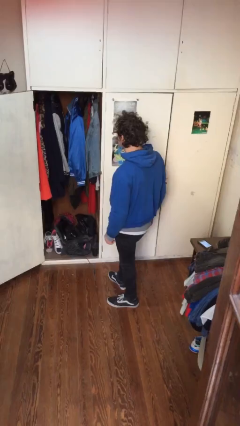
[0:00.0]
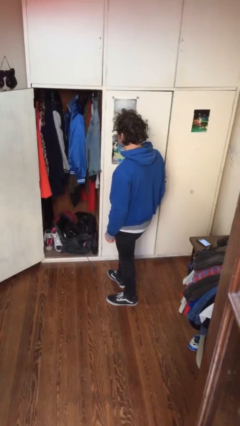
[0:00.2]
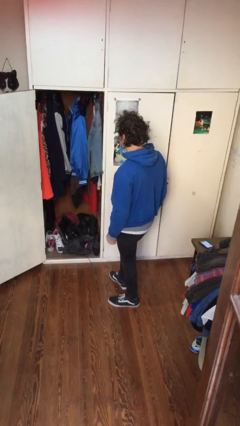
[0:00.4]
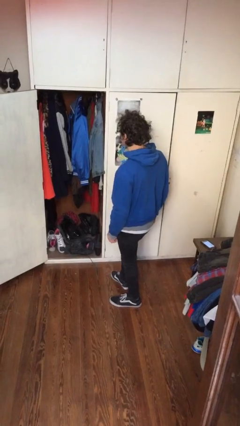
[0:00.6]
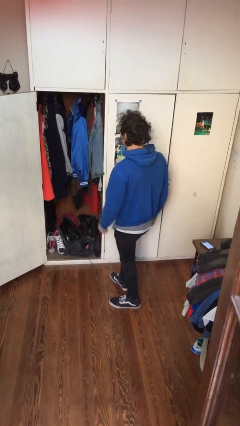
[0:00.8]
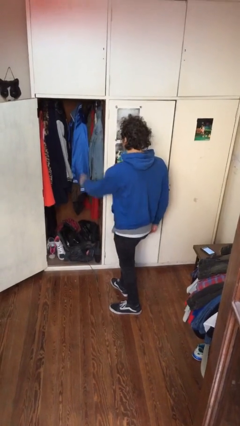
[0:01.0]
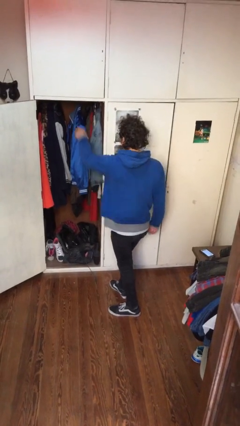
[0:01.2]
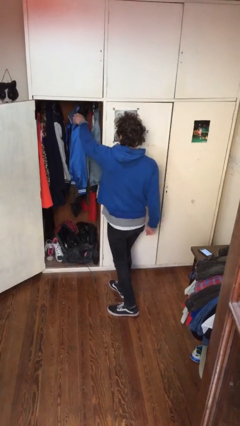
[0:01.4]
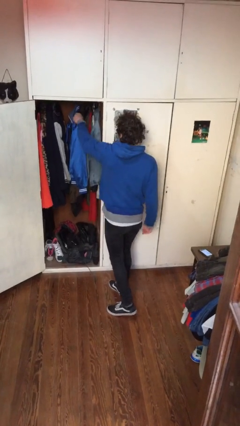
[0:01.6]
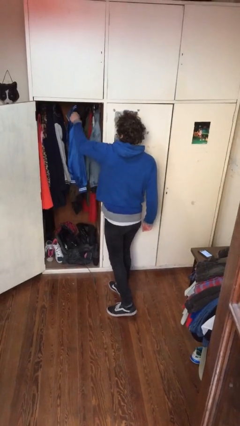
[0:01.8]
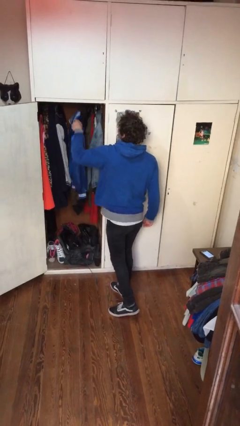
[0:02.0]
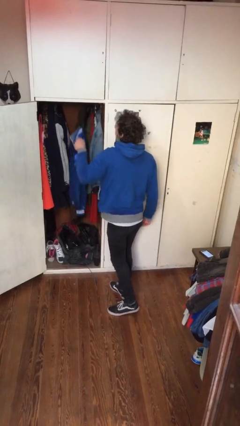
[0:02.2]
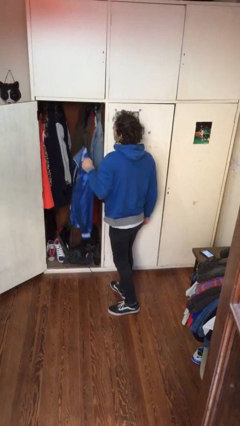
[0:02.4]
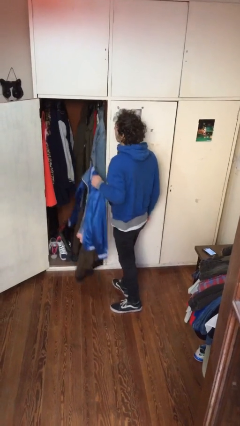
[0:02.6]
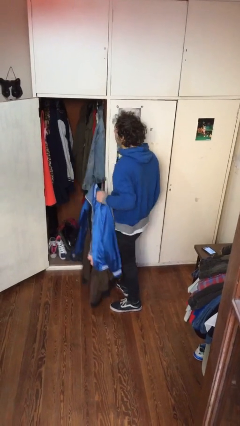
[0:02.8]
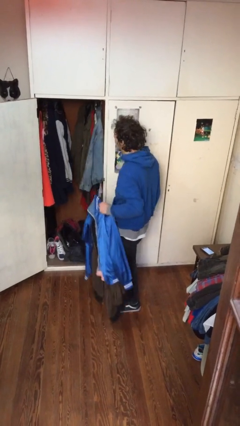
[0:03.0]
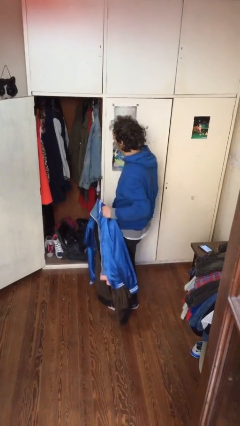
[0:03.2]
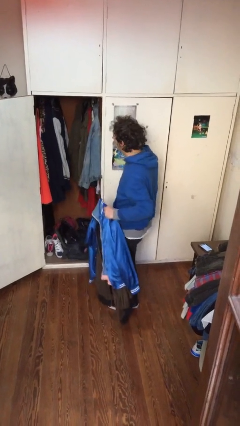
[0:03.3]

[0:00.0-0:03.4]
person takes clothes from closet

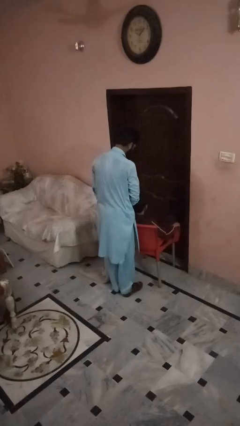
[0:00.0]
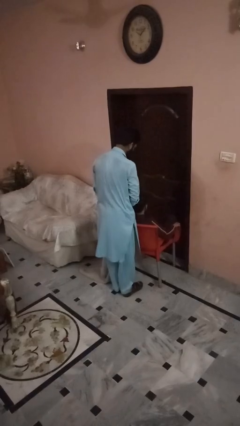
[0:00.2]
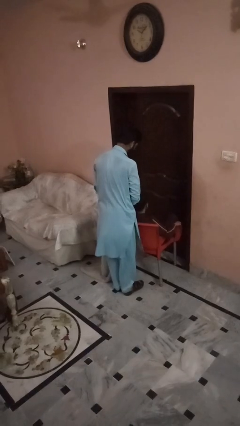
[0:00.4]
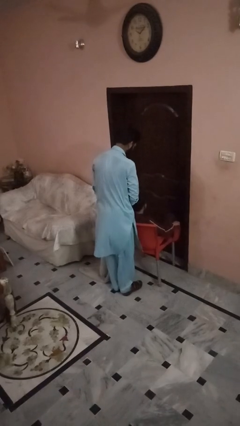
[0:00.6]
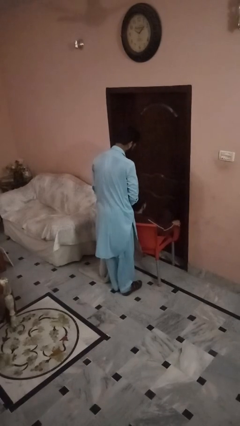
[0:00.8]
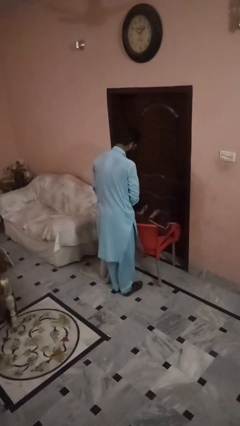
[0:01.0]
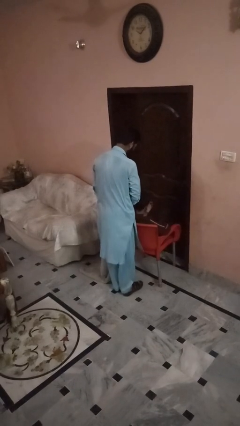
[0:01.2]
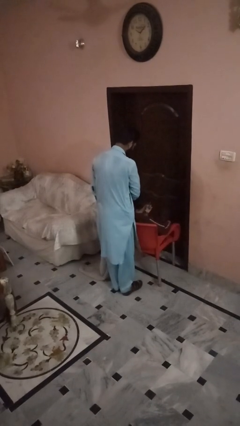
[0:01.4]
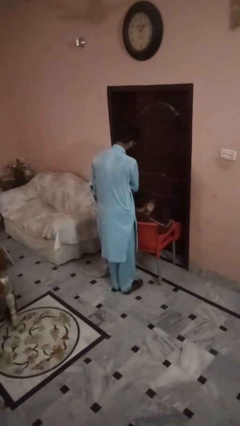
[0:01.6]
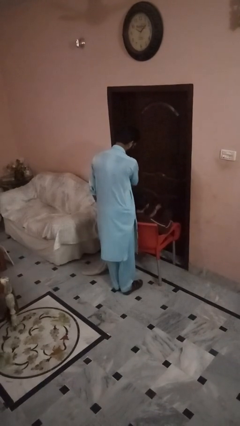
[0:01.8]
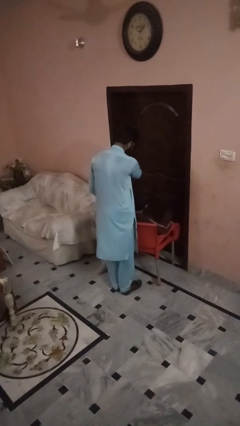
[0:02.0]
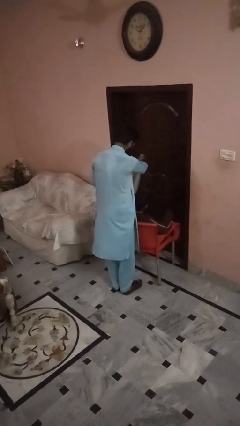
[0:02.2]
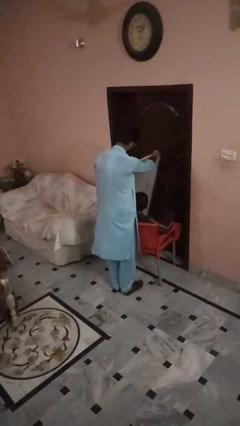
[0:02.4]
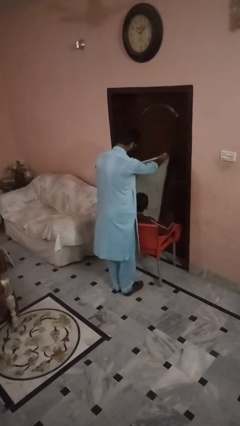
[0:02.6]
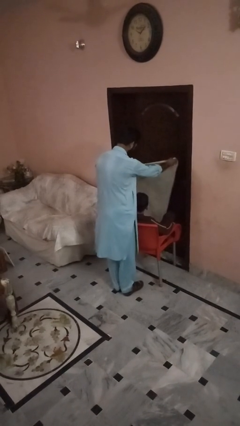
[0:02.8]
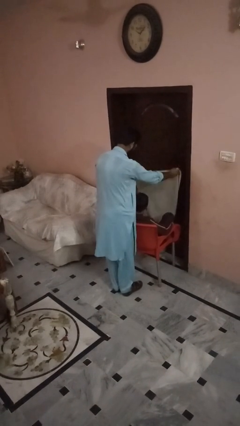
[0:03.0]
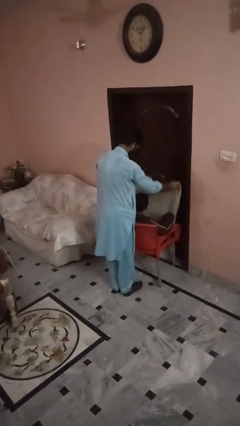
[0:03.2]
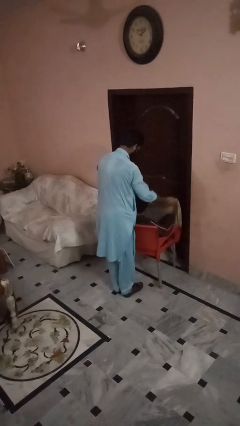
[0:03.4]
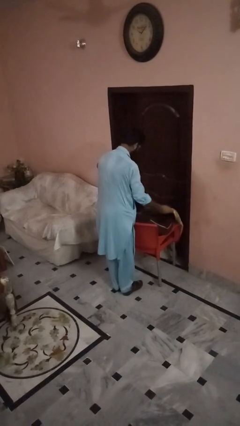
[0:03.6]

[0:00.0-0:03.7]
person covers friend with blanket

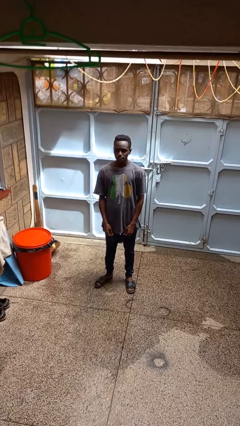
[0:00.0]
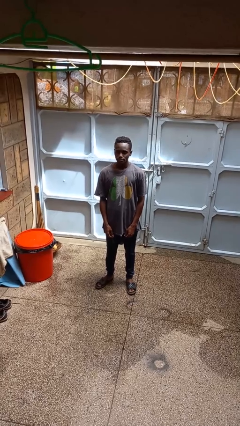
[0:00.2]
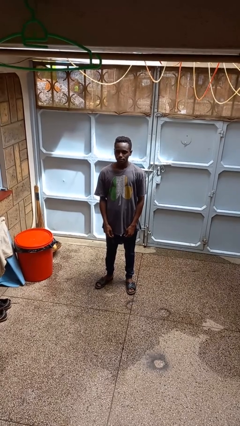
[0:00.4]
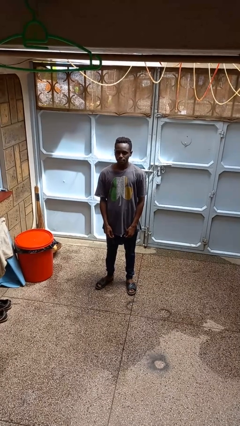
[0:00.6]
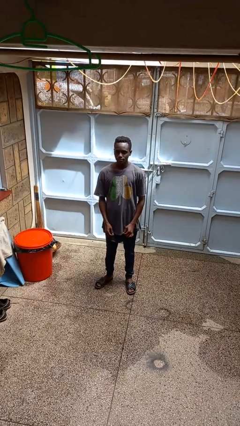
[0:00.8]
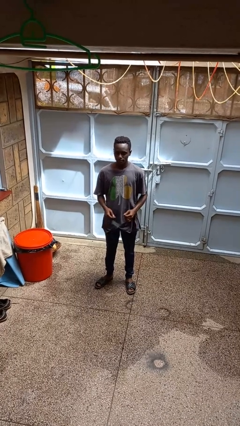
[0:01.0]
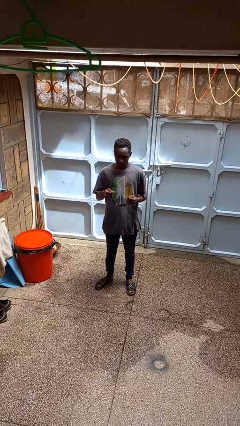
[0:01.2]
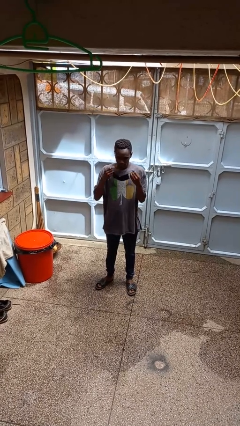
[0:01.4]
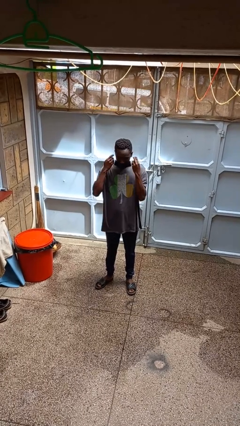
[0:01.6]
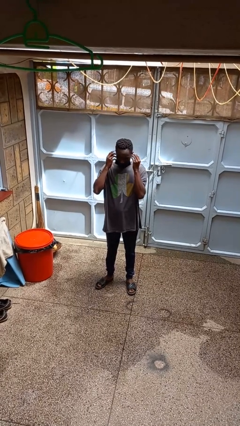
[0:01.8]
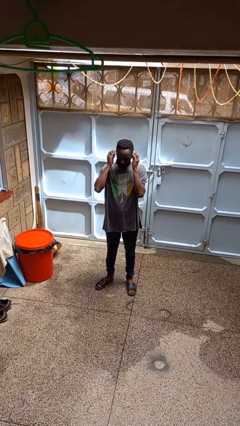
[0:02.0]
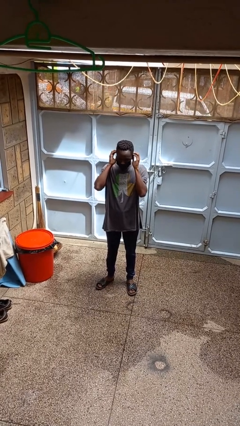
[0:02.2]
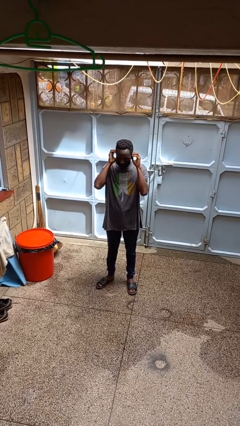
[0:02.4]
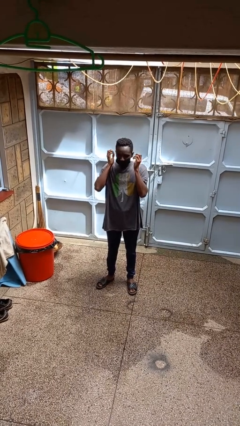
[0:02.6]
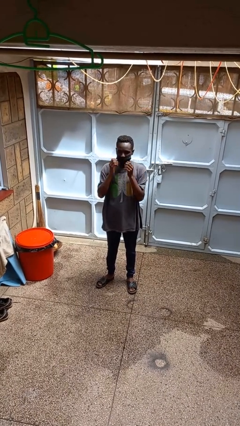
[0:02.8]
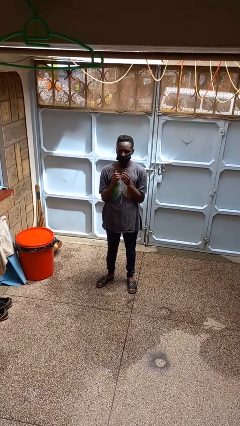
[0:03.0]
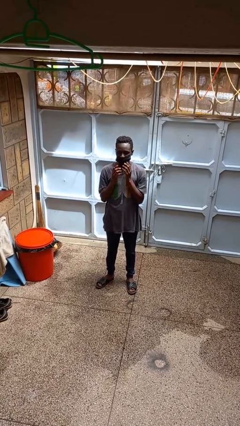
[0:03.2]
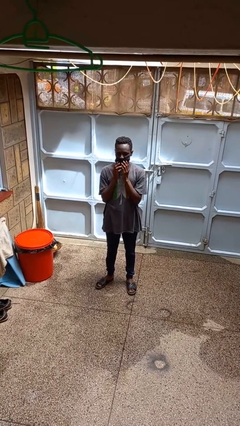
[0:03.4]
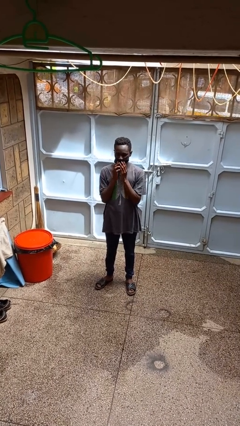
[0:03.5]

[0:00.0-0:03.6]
person puts on facemask

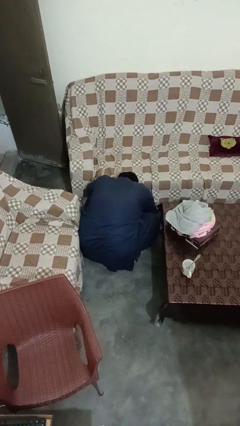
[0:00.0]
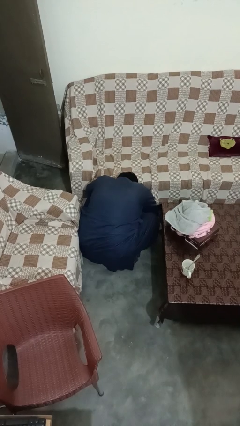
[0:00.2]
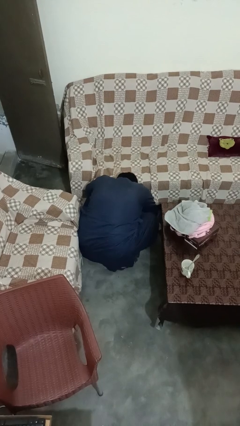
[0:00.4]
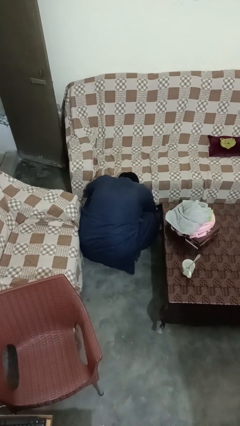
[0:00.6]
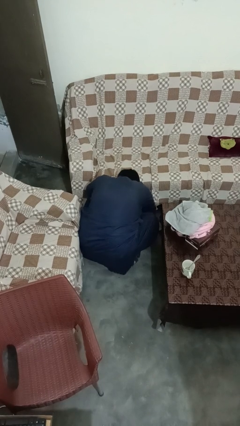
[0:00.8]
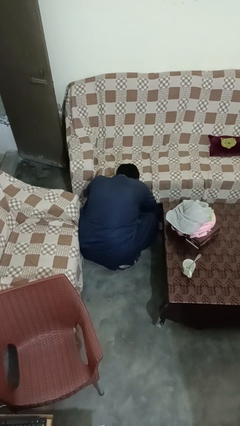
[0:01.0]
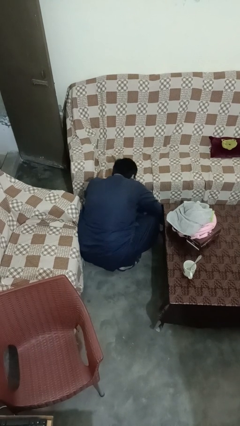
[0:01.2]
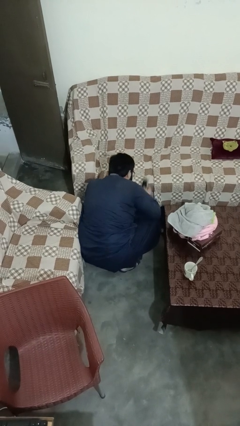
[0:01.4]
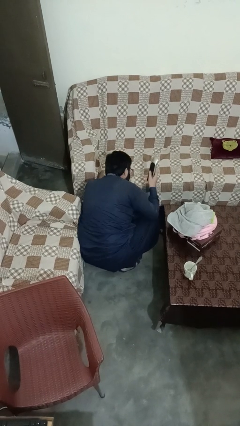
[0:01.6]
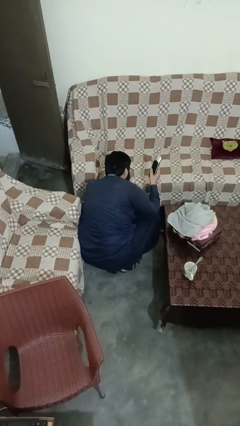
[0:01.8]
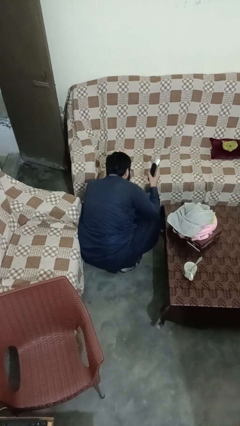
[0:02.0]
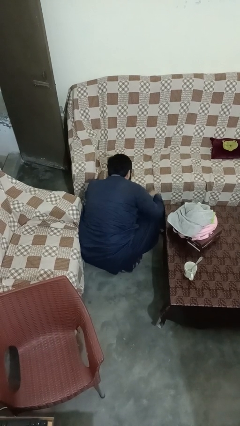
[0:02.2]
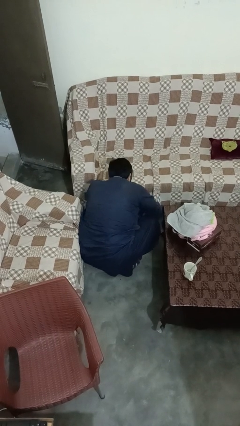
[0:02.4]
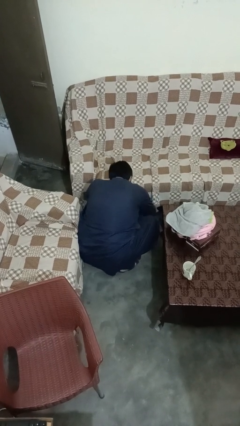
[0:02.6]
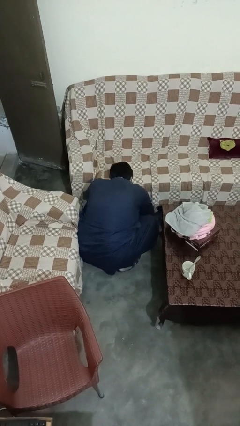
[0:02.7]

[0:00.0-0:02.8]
person searches under couch

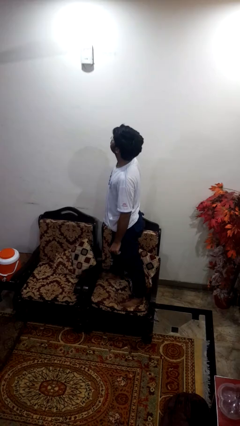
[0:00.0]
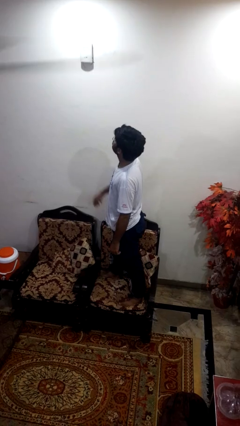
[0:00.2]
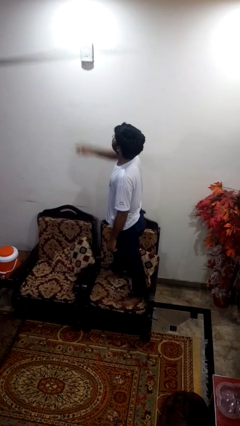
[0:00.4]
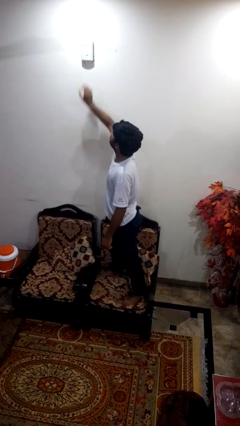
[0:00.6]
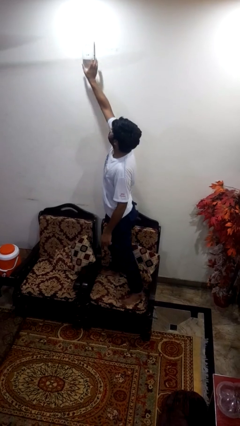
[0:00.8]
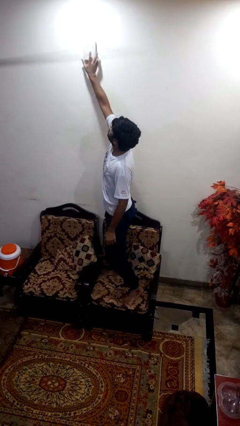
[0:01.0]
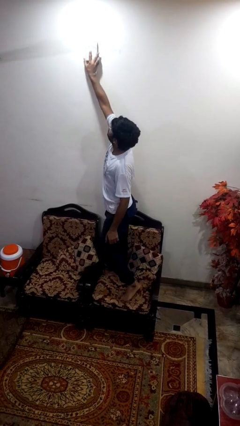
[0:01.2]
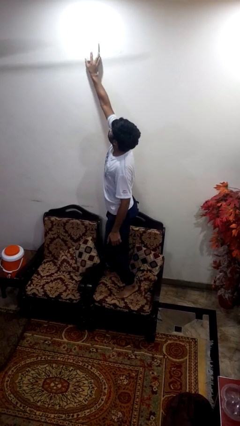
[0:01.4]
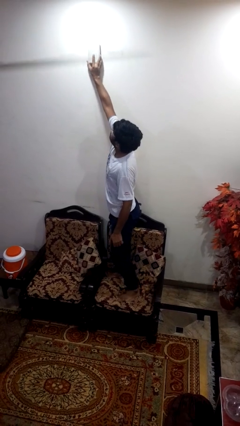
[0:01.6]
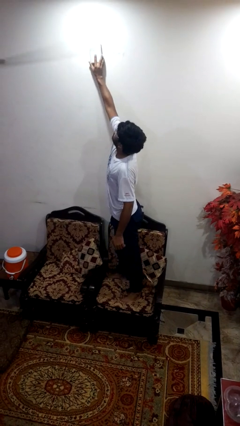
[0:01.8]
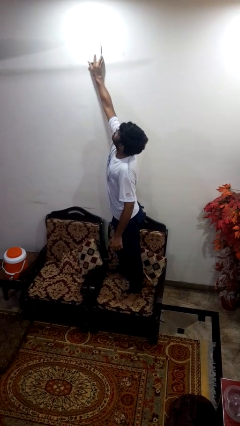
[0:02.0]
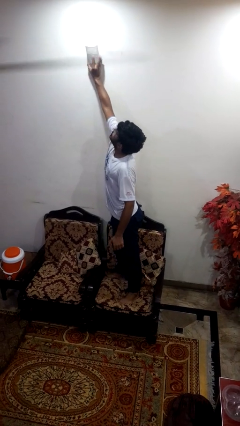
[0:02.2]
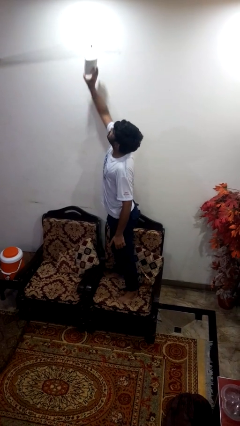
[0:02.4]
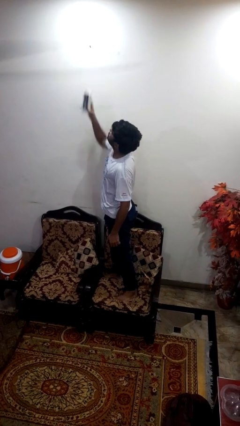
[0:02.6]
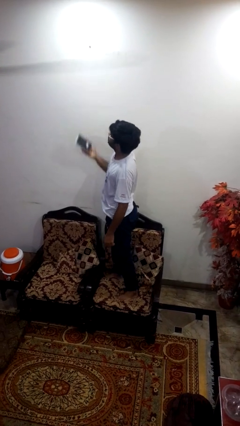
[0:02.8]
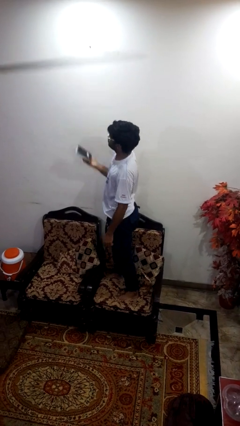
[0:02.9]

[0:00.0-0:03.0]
person takes down smoke detector

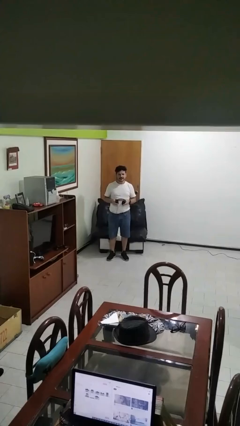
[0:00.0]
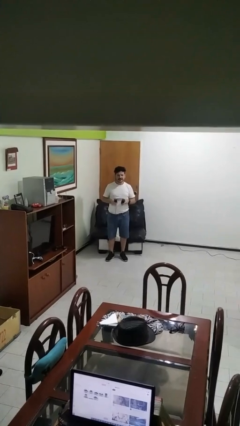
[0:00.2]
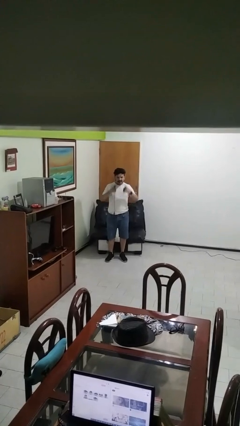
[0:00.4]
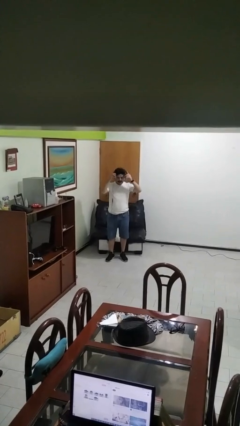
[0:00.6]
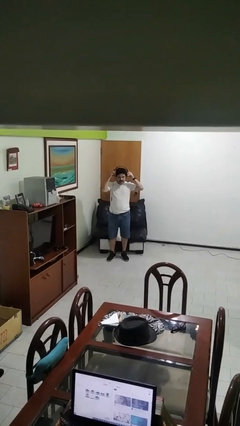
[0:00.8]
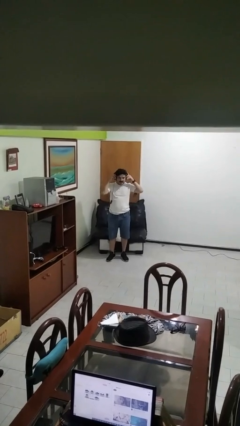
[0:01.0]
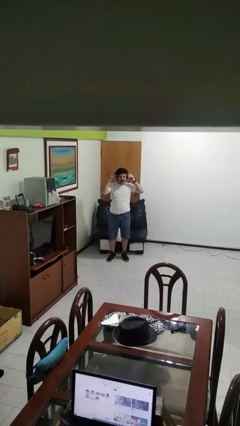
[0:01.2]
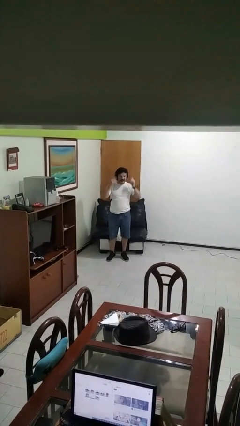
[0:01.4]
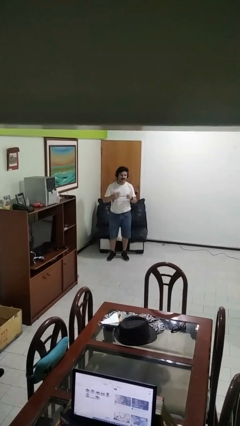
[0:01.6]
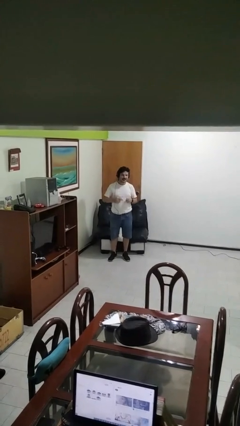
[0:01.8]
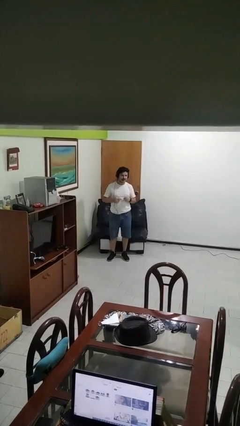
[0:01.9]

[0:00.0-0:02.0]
person puts on headphones
